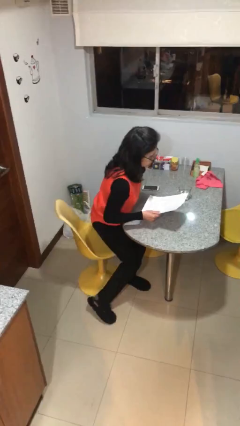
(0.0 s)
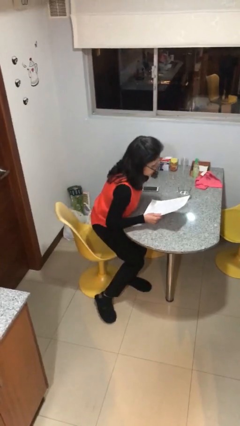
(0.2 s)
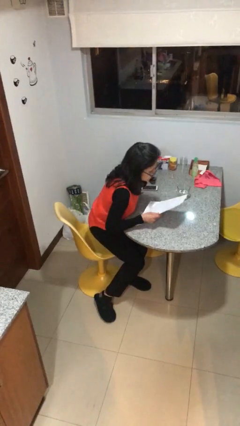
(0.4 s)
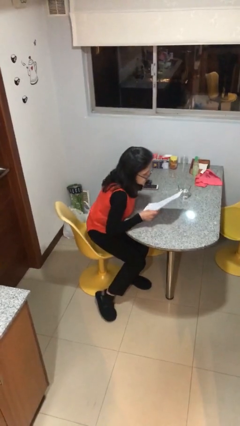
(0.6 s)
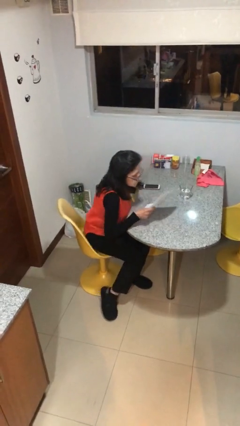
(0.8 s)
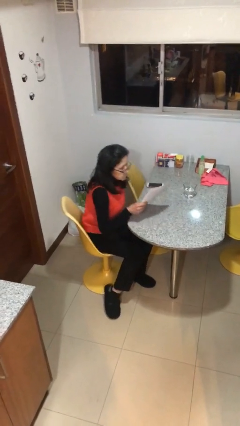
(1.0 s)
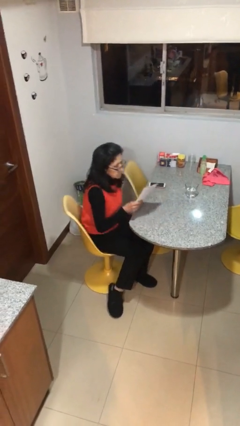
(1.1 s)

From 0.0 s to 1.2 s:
person sits down

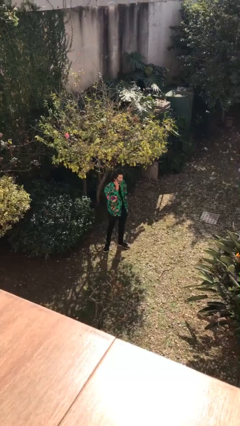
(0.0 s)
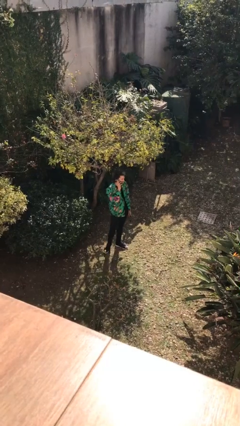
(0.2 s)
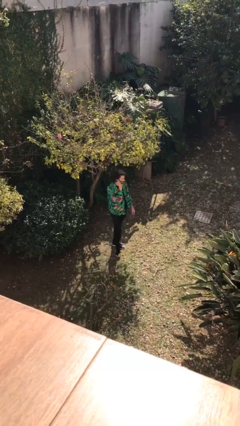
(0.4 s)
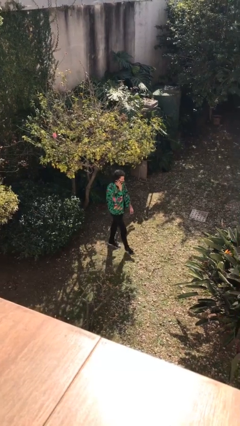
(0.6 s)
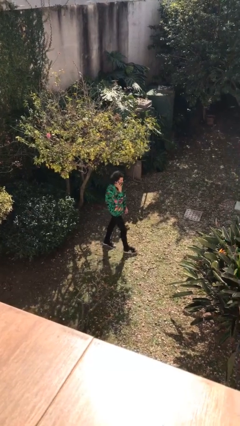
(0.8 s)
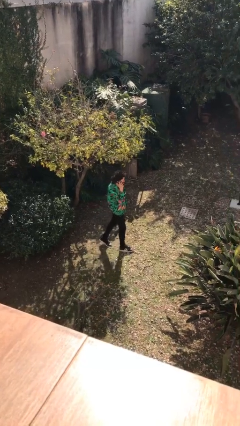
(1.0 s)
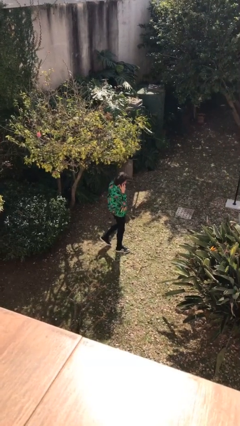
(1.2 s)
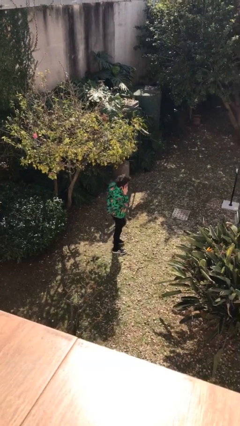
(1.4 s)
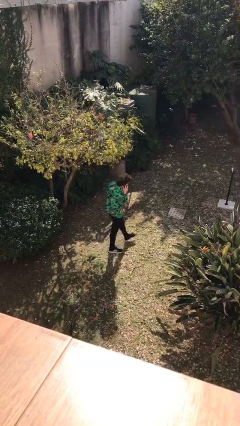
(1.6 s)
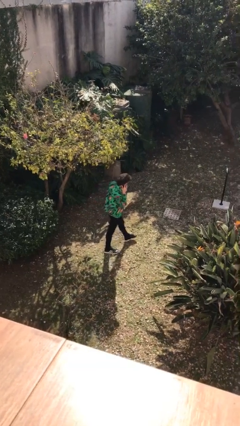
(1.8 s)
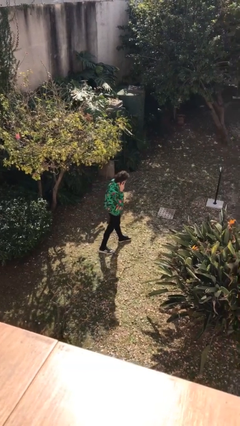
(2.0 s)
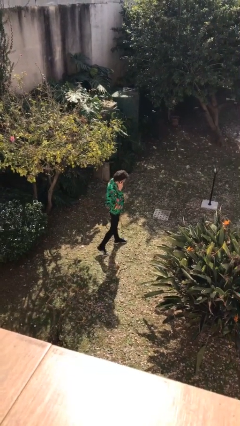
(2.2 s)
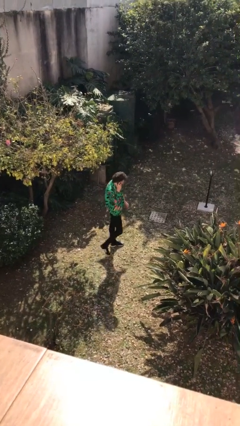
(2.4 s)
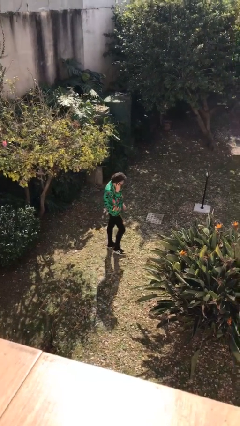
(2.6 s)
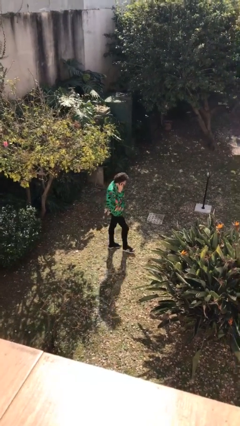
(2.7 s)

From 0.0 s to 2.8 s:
person talks on phone

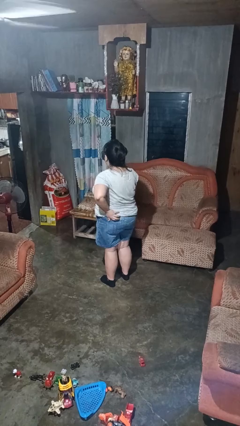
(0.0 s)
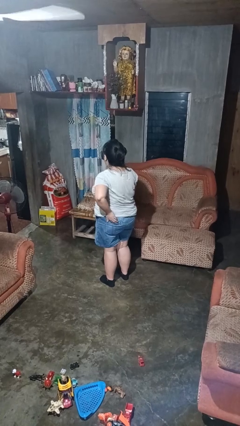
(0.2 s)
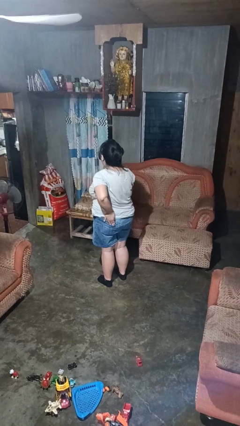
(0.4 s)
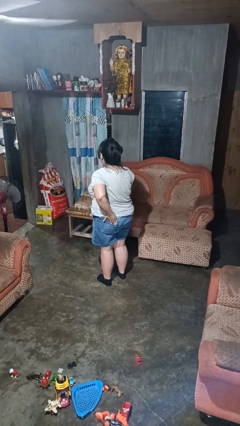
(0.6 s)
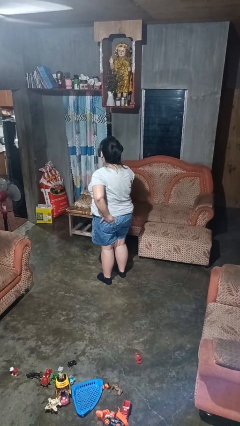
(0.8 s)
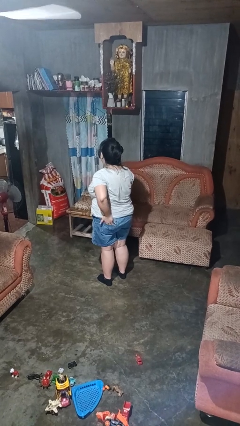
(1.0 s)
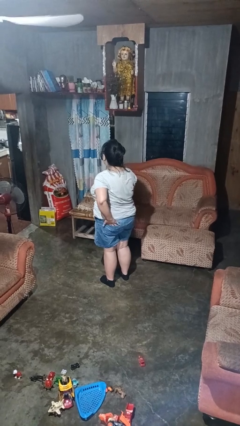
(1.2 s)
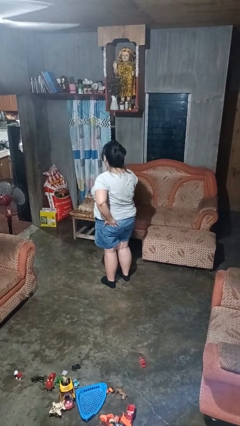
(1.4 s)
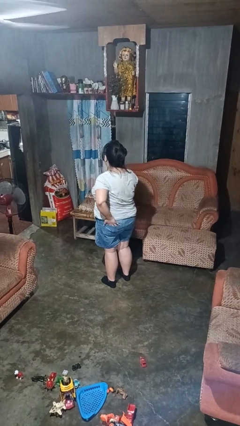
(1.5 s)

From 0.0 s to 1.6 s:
person puts hands in back pockets

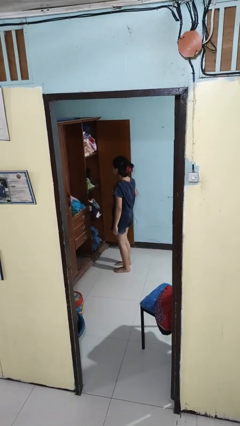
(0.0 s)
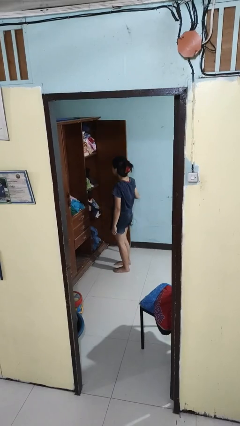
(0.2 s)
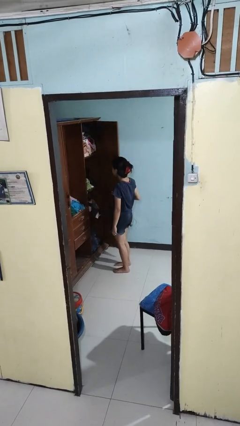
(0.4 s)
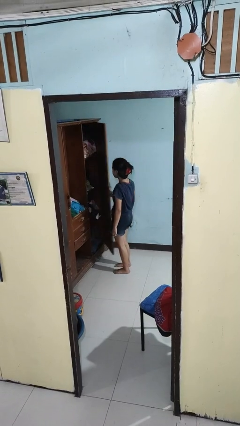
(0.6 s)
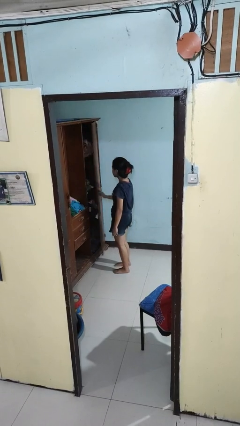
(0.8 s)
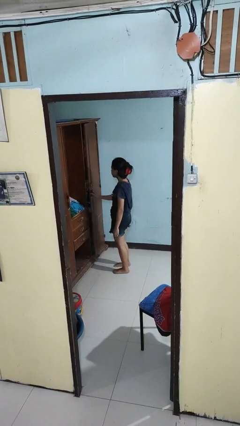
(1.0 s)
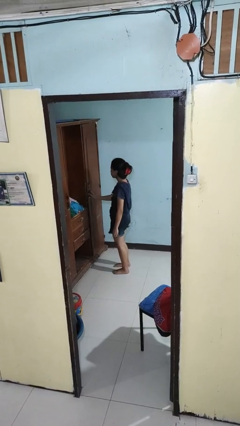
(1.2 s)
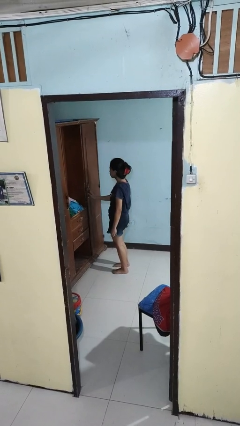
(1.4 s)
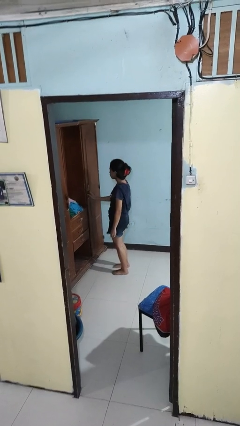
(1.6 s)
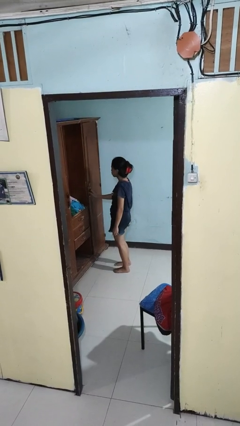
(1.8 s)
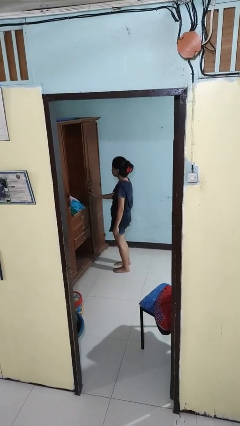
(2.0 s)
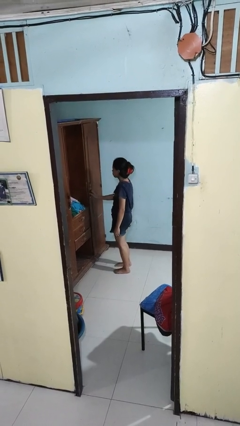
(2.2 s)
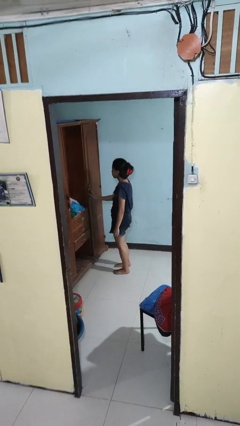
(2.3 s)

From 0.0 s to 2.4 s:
person closes closet door

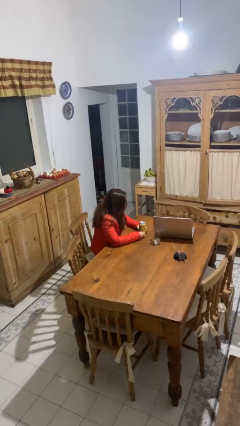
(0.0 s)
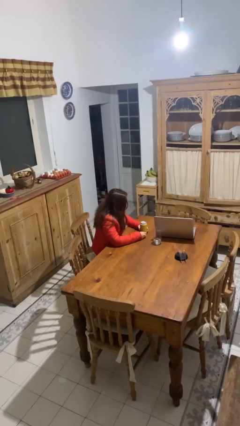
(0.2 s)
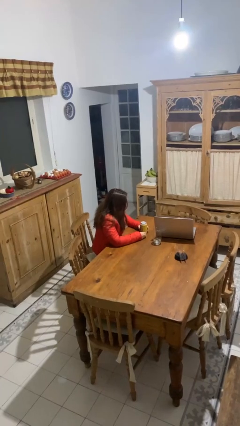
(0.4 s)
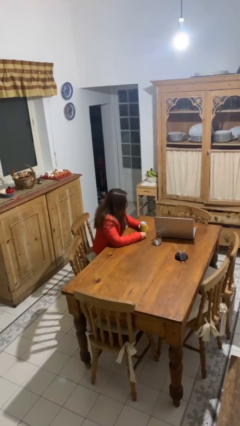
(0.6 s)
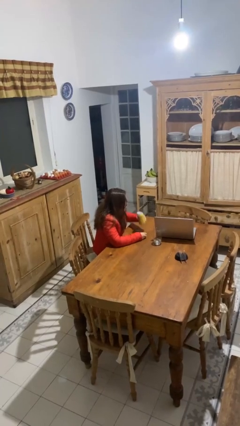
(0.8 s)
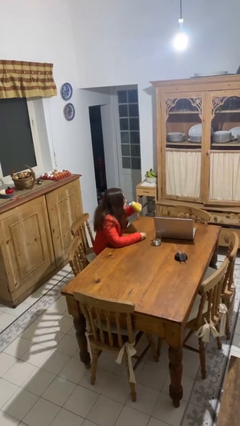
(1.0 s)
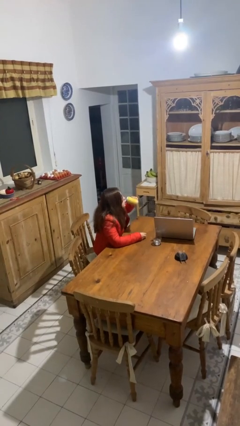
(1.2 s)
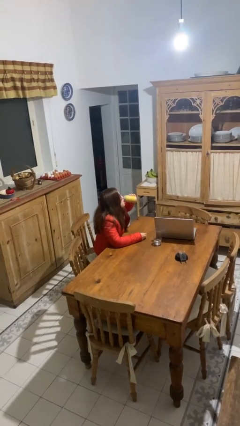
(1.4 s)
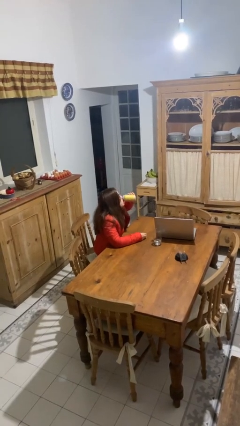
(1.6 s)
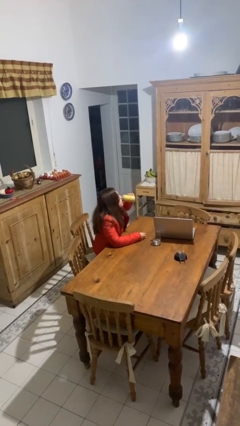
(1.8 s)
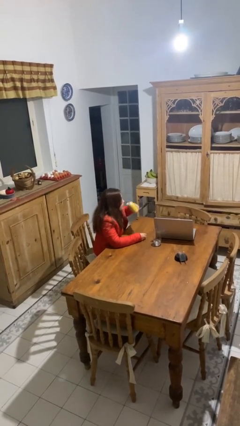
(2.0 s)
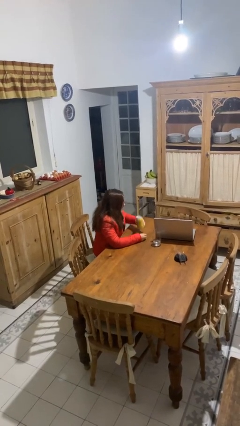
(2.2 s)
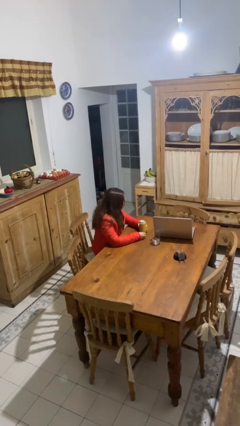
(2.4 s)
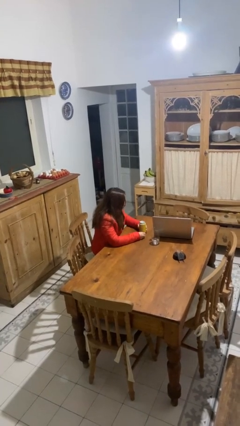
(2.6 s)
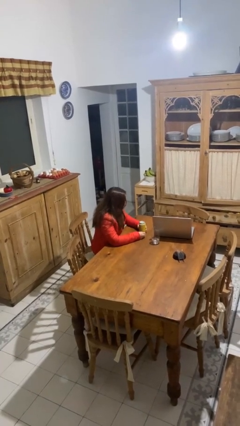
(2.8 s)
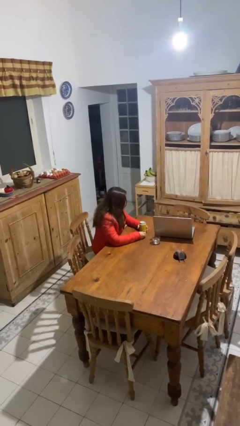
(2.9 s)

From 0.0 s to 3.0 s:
person drinks from beverage can

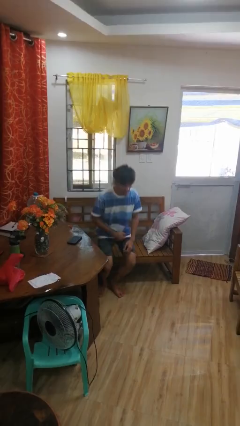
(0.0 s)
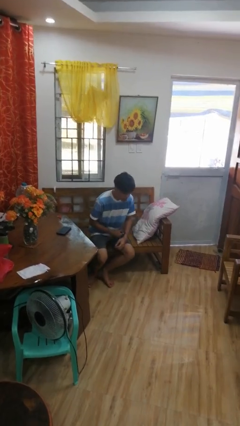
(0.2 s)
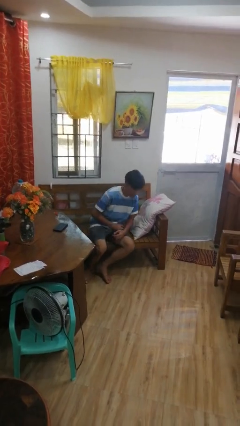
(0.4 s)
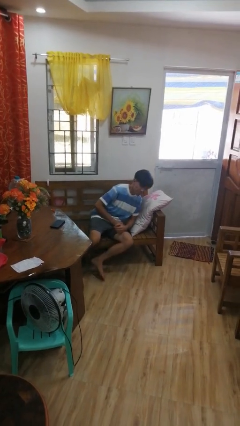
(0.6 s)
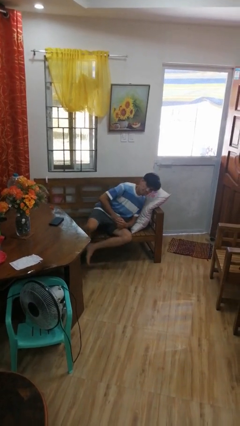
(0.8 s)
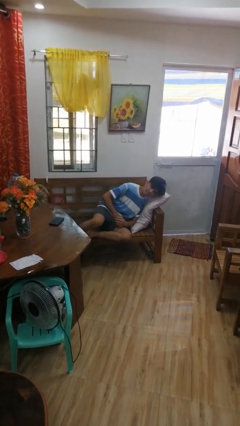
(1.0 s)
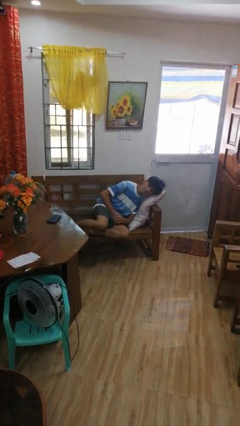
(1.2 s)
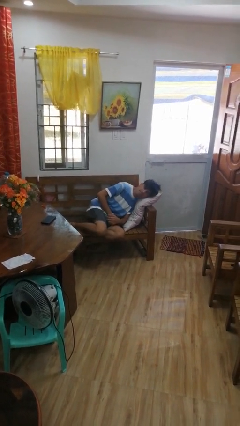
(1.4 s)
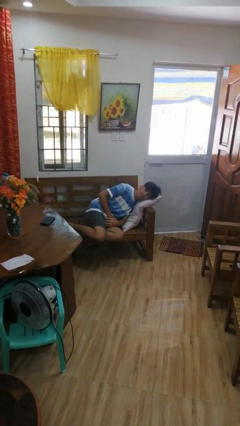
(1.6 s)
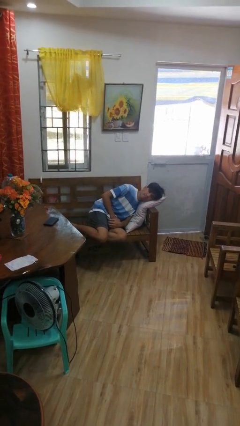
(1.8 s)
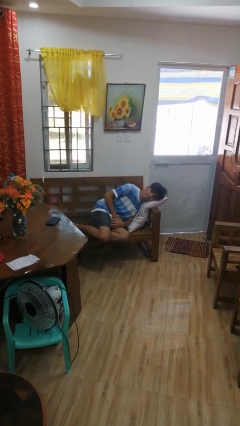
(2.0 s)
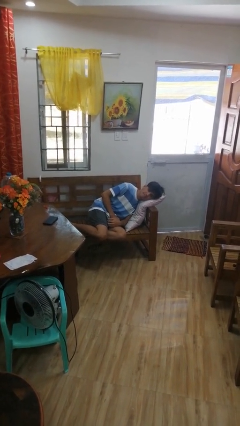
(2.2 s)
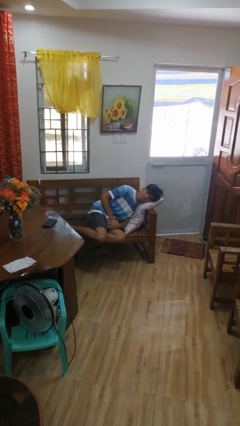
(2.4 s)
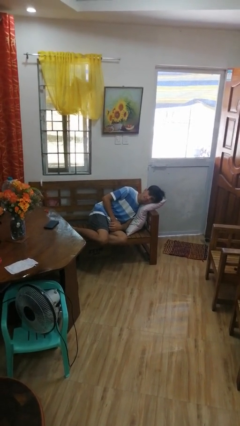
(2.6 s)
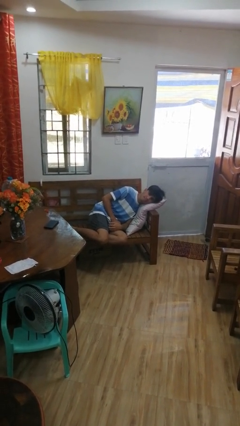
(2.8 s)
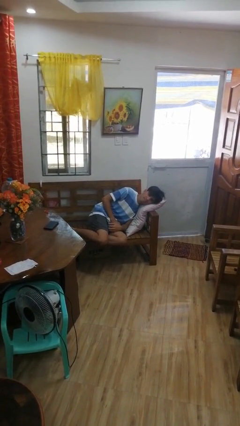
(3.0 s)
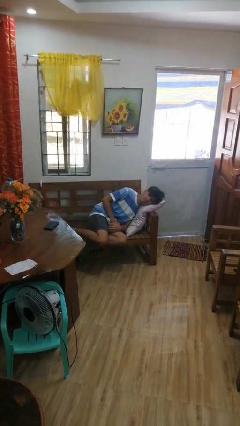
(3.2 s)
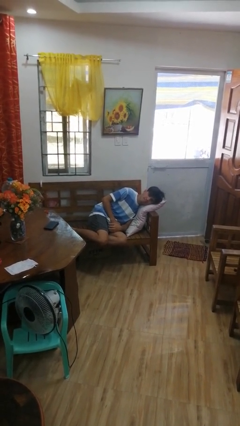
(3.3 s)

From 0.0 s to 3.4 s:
person lies down on couch

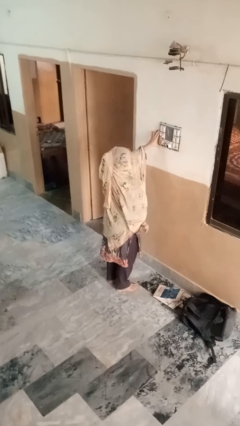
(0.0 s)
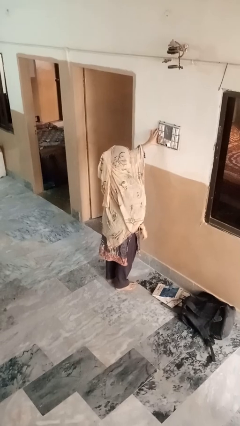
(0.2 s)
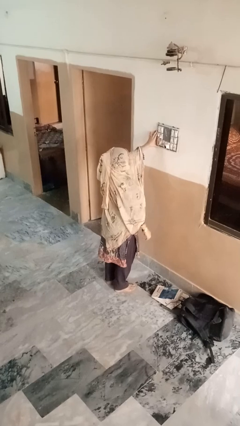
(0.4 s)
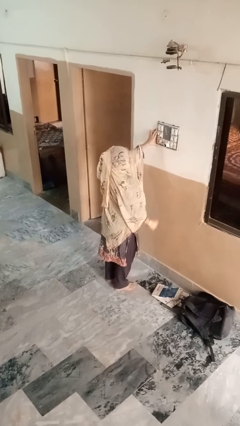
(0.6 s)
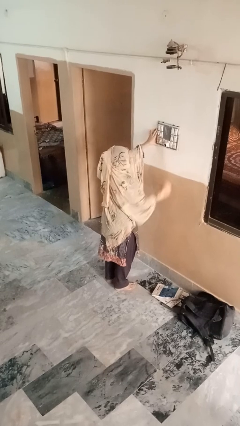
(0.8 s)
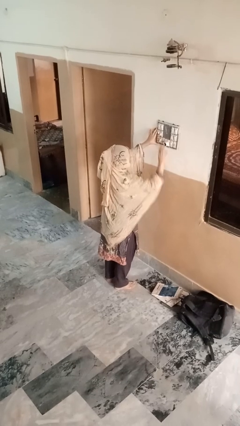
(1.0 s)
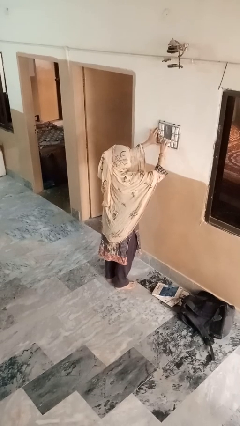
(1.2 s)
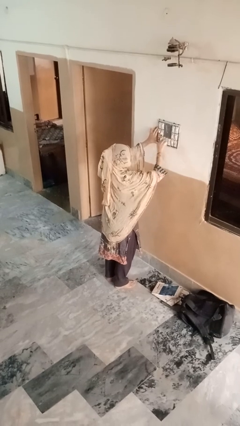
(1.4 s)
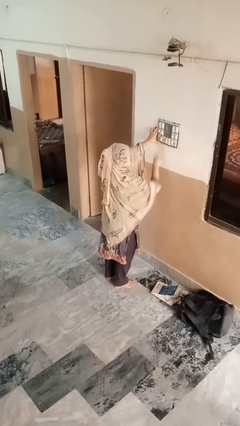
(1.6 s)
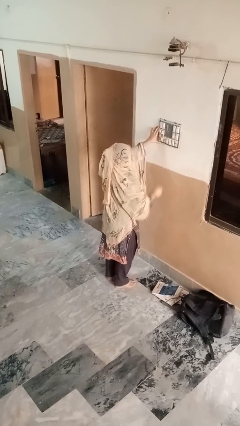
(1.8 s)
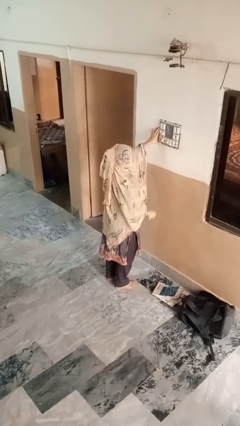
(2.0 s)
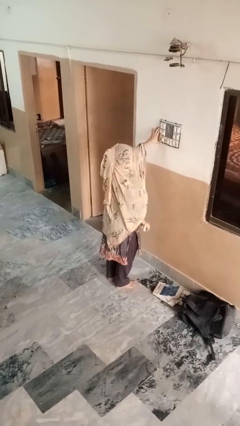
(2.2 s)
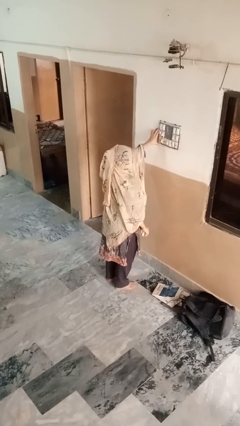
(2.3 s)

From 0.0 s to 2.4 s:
person unplugs from electrical socket

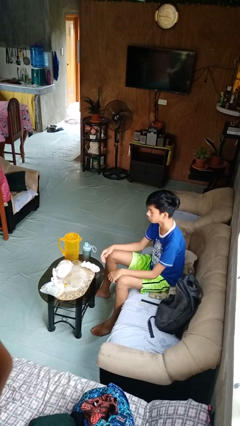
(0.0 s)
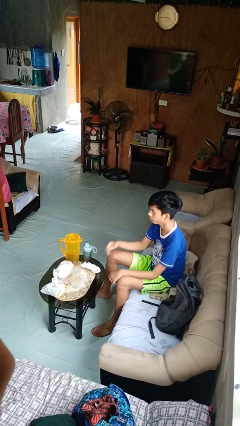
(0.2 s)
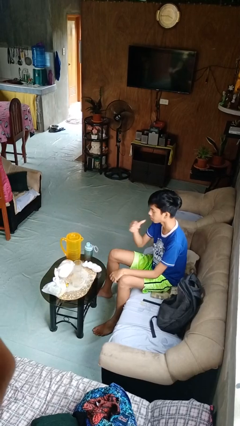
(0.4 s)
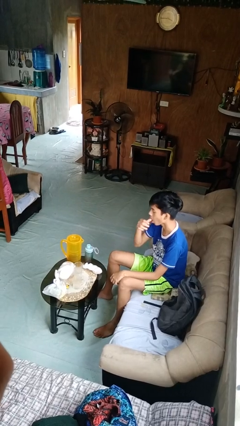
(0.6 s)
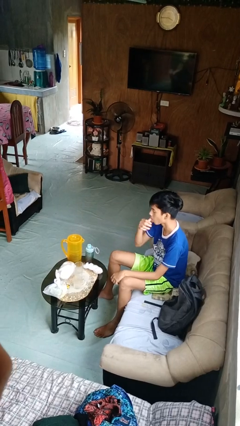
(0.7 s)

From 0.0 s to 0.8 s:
person licks fingers
